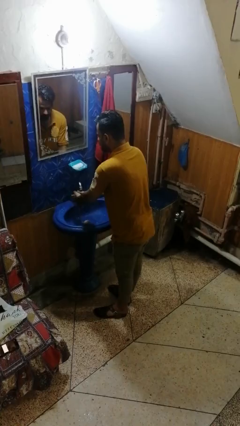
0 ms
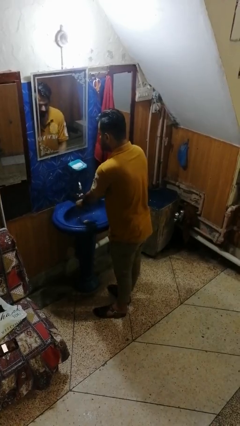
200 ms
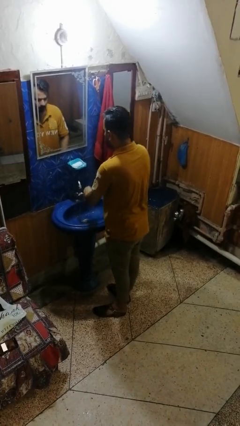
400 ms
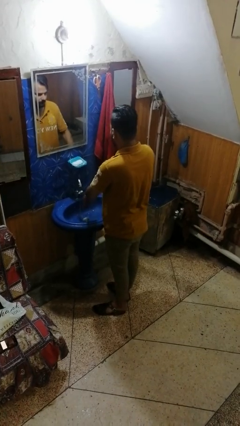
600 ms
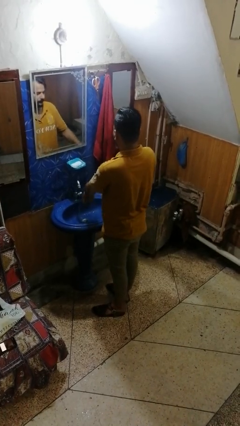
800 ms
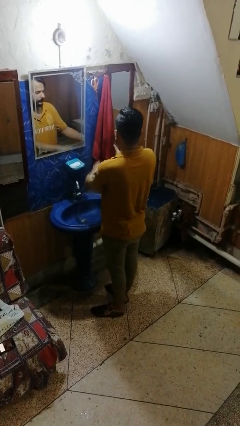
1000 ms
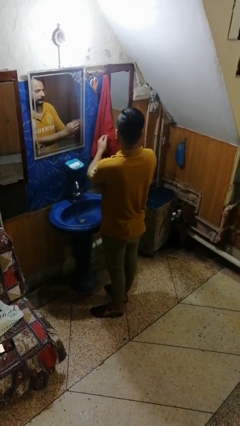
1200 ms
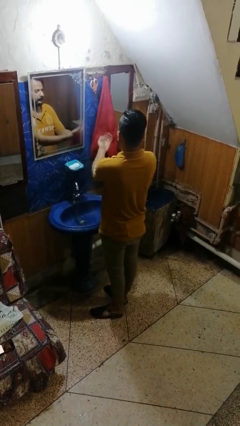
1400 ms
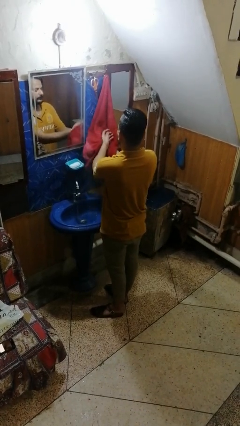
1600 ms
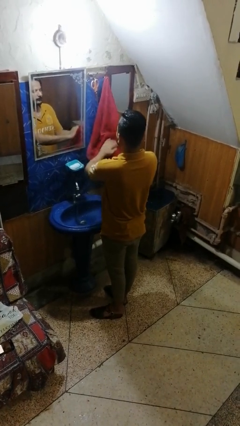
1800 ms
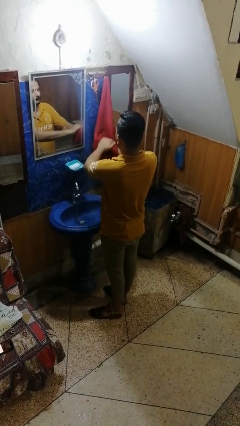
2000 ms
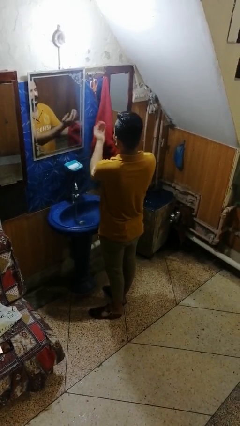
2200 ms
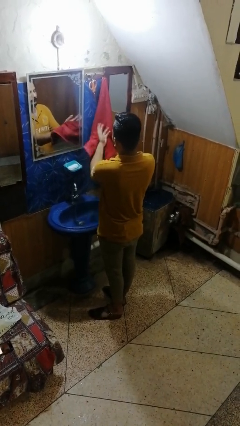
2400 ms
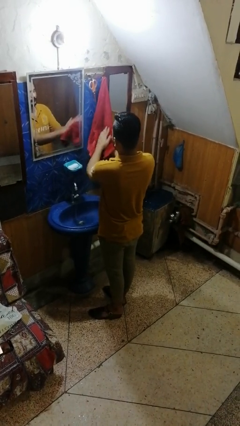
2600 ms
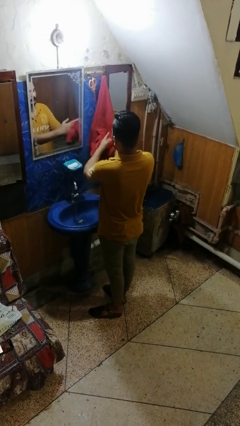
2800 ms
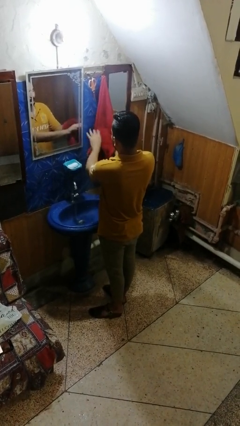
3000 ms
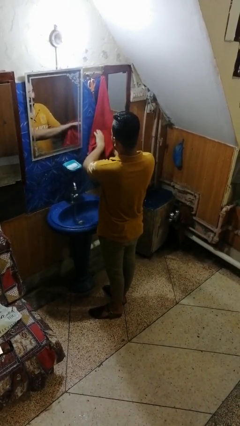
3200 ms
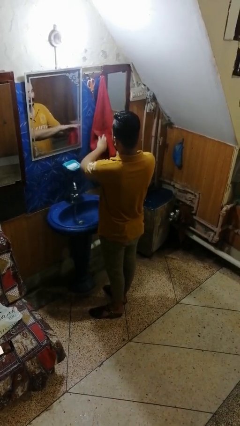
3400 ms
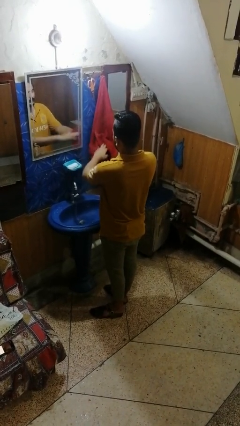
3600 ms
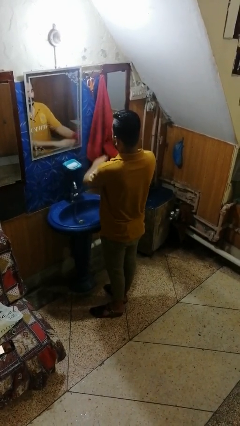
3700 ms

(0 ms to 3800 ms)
person dries hands with towel

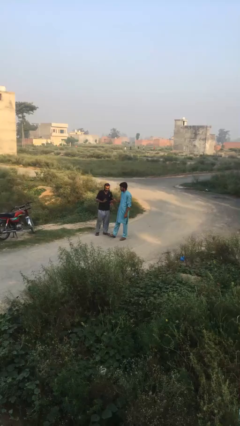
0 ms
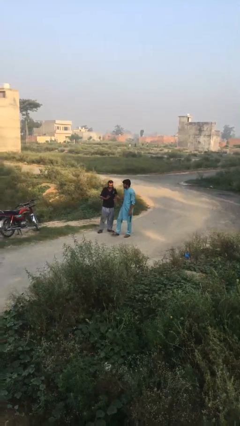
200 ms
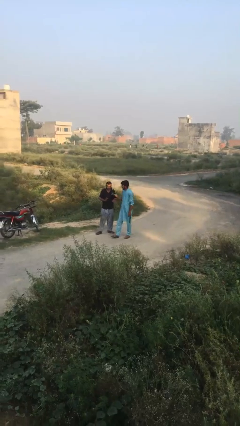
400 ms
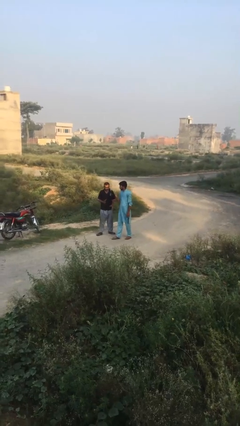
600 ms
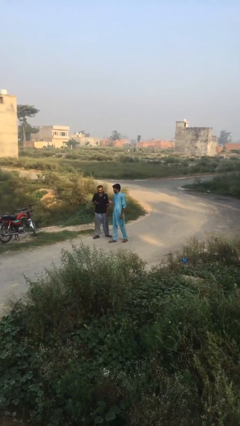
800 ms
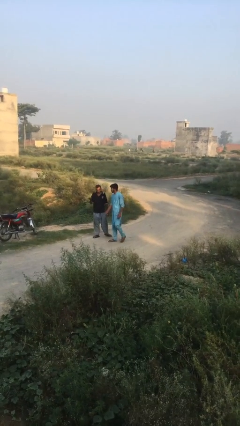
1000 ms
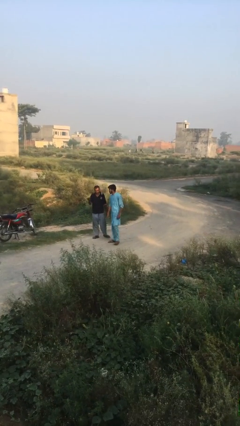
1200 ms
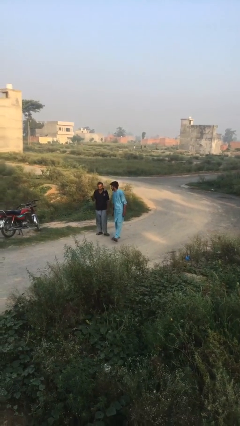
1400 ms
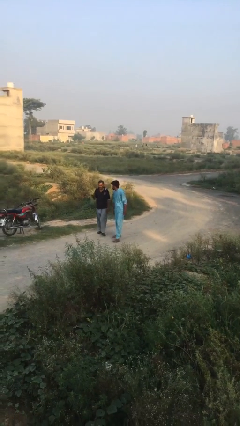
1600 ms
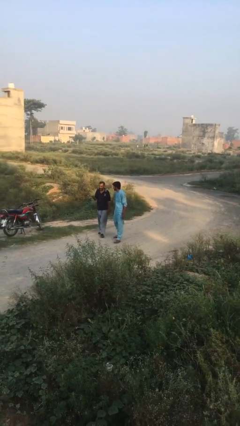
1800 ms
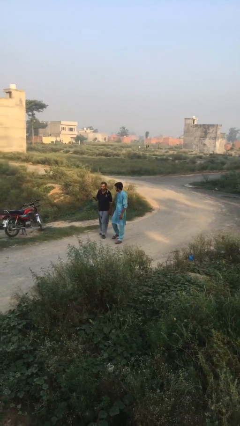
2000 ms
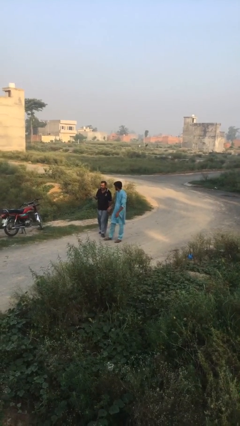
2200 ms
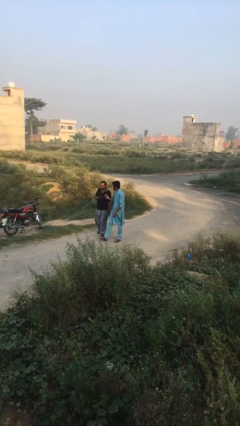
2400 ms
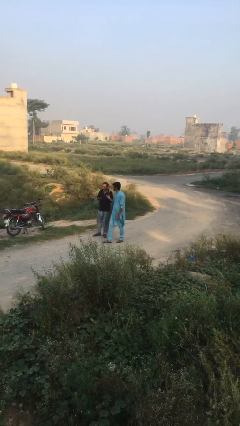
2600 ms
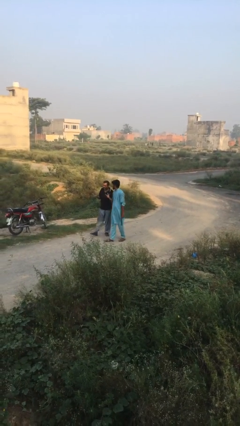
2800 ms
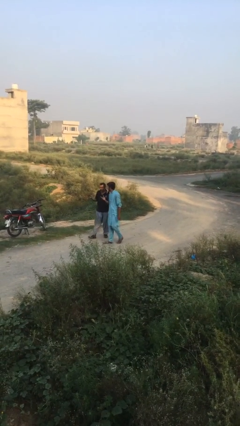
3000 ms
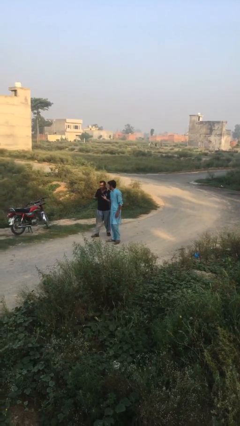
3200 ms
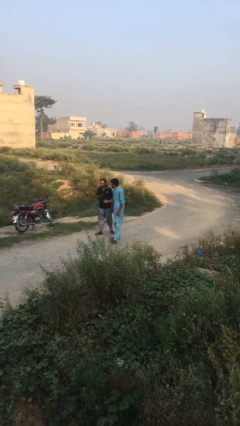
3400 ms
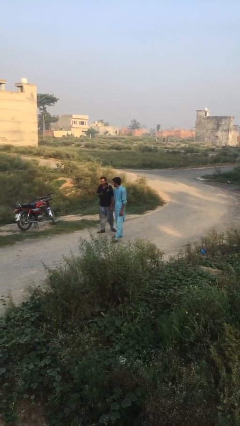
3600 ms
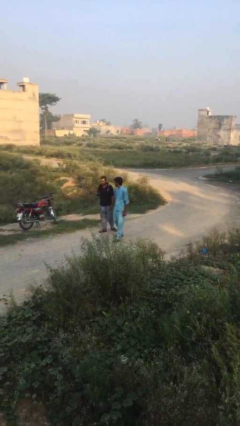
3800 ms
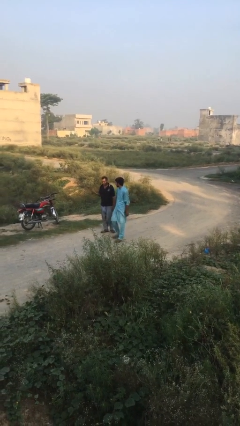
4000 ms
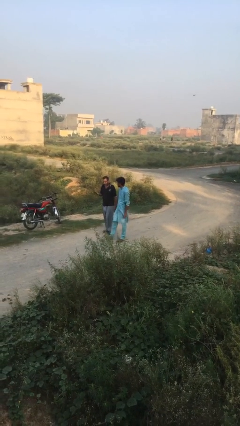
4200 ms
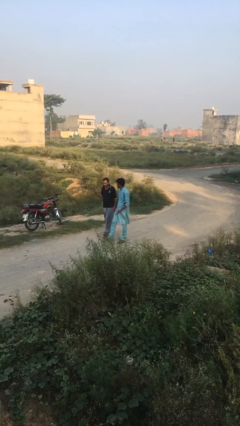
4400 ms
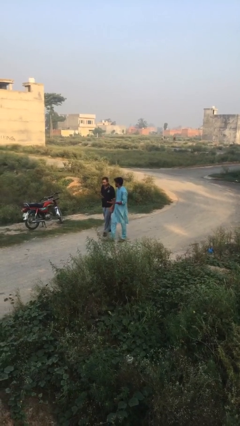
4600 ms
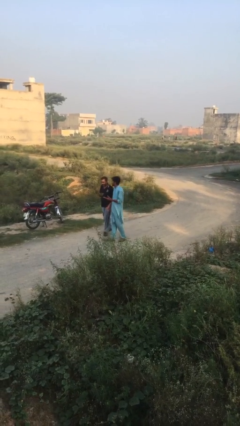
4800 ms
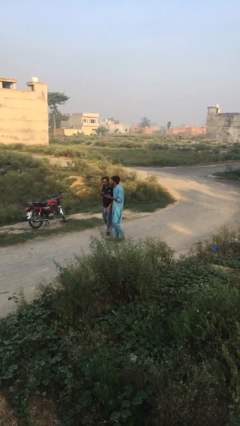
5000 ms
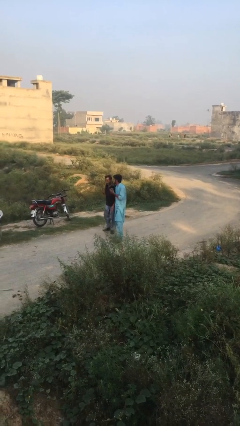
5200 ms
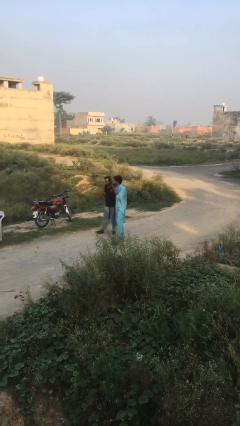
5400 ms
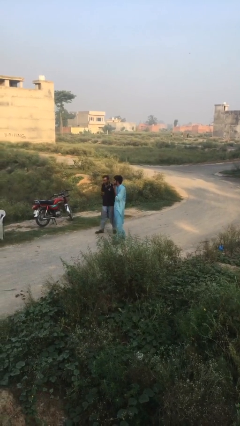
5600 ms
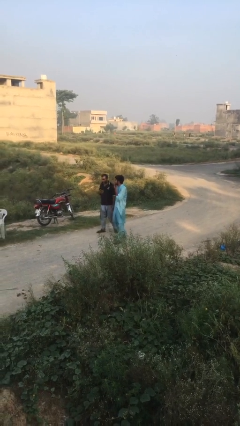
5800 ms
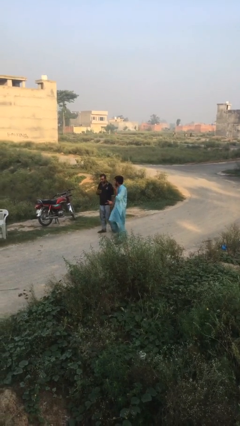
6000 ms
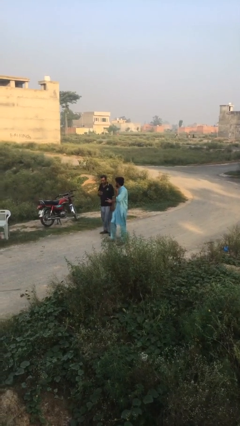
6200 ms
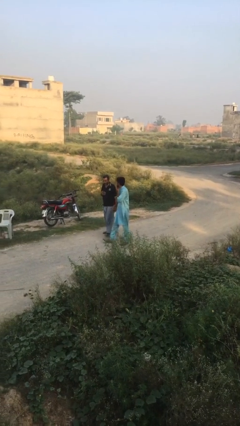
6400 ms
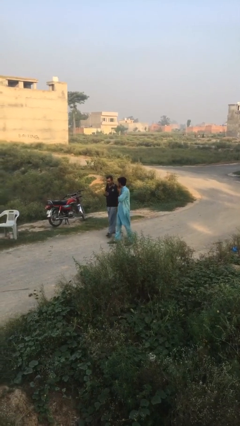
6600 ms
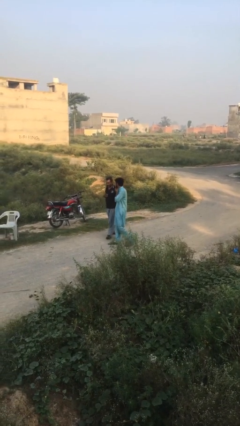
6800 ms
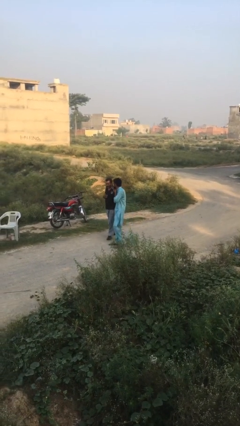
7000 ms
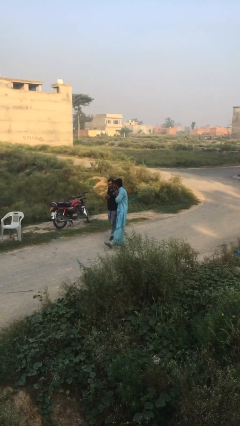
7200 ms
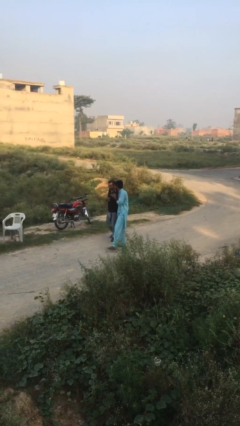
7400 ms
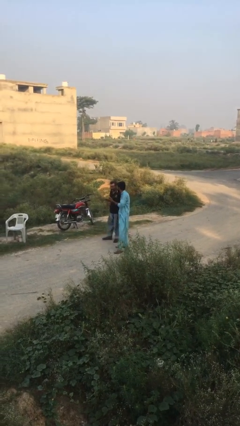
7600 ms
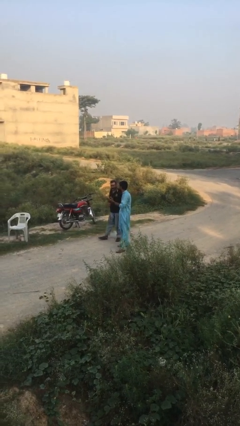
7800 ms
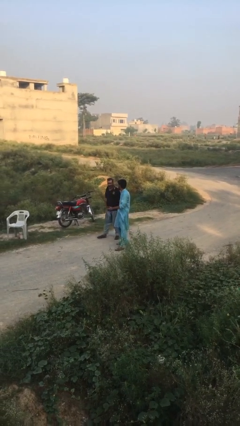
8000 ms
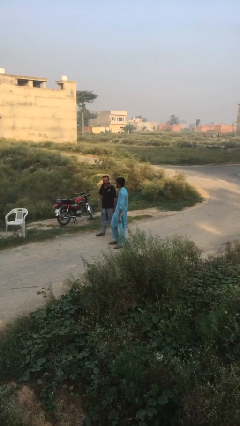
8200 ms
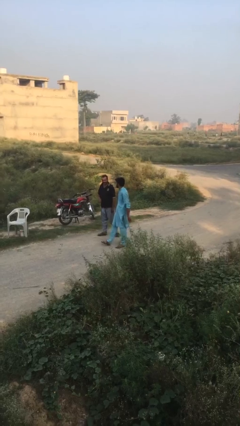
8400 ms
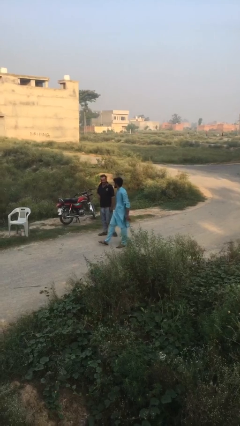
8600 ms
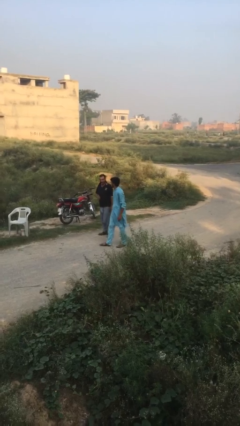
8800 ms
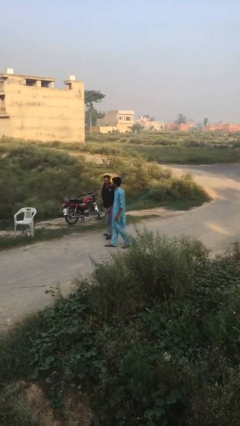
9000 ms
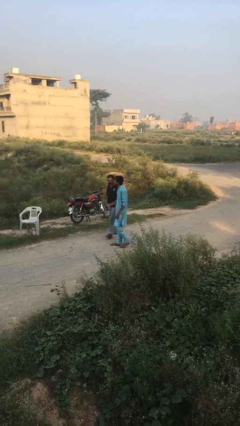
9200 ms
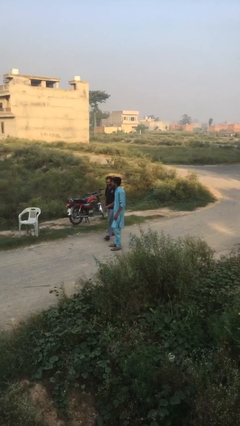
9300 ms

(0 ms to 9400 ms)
person talks to person

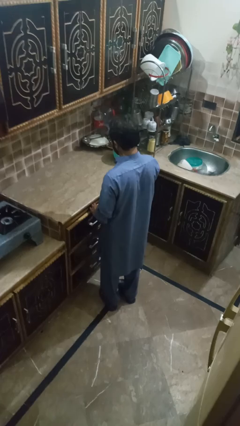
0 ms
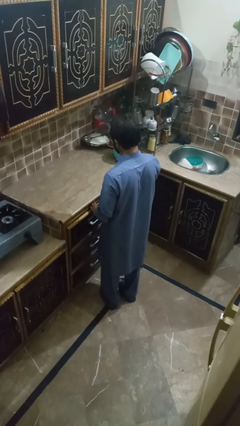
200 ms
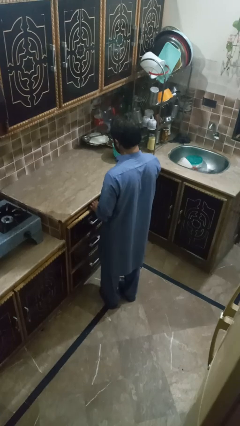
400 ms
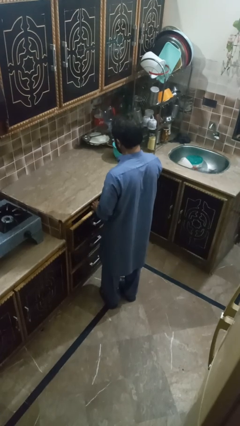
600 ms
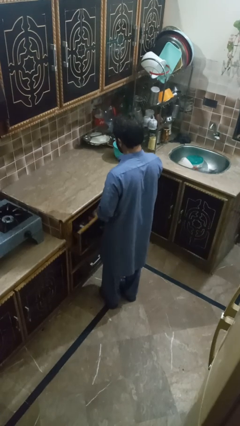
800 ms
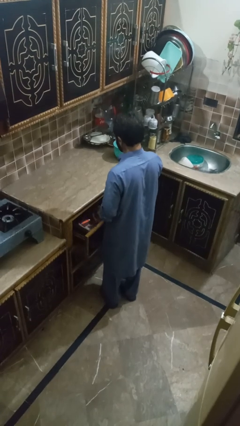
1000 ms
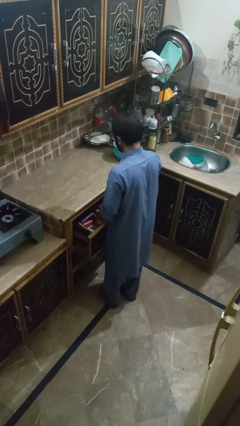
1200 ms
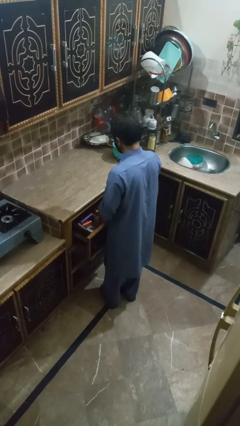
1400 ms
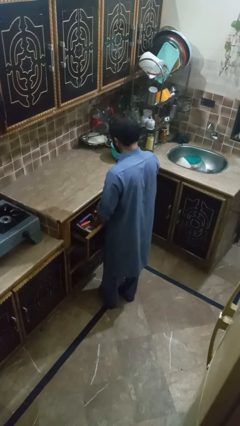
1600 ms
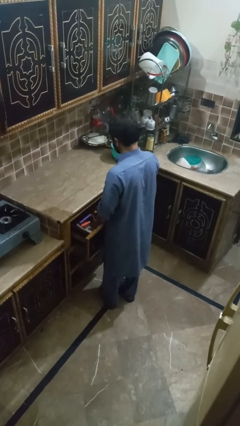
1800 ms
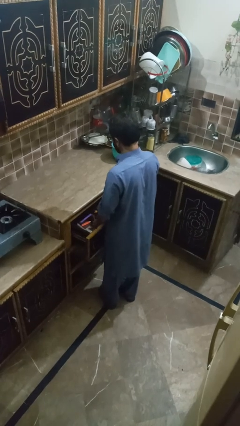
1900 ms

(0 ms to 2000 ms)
person searches in kitchen drawer

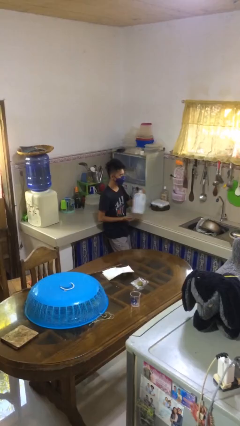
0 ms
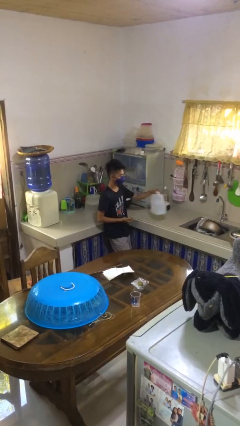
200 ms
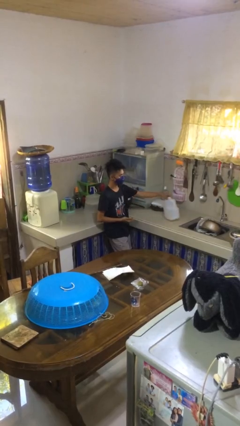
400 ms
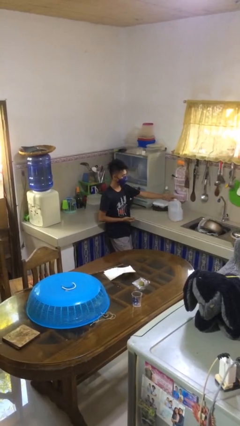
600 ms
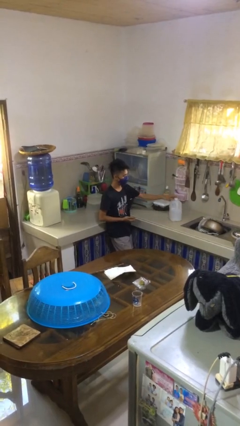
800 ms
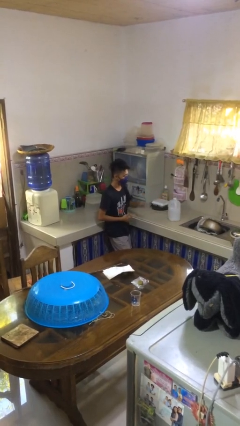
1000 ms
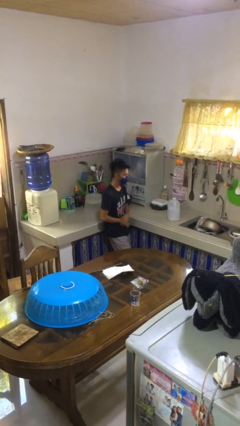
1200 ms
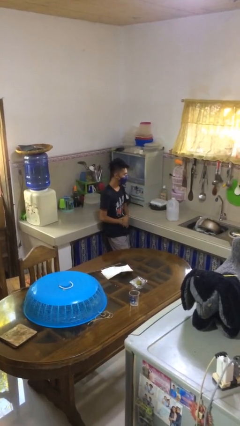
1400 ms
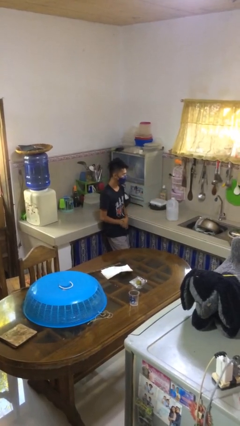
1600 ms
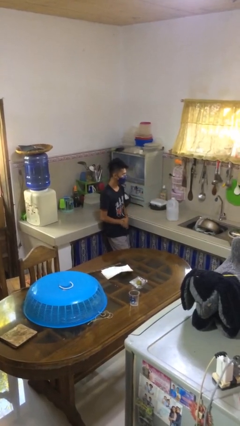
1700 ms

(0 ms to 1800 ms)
person puts down object on countertop

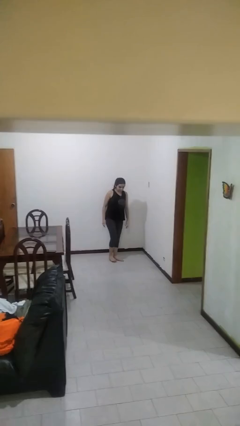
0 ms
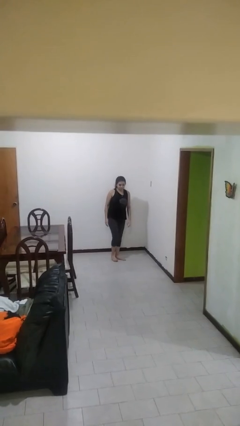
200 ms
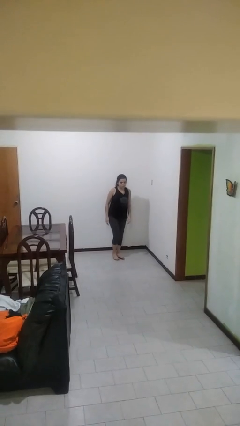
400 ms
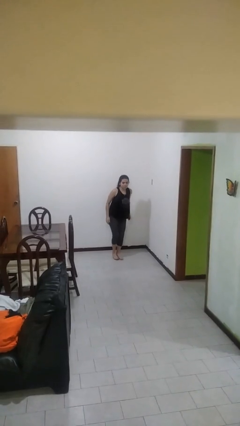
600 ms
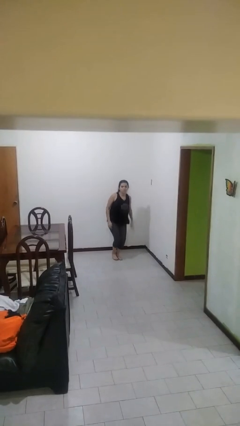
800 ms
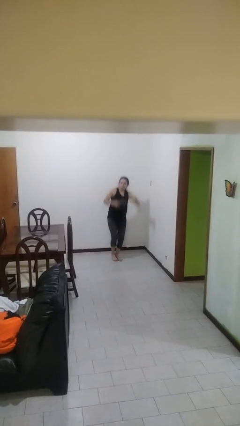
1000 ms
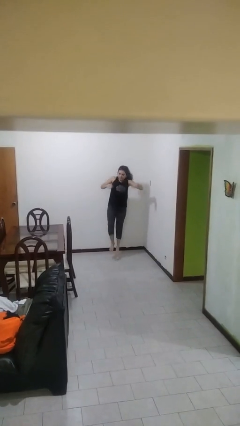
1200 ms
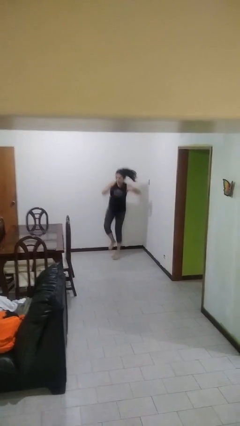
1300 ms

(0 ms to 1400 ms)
person jumps
